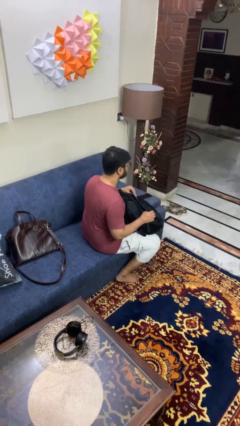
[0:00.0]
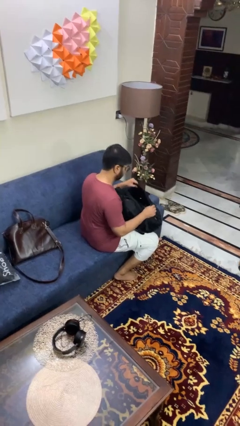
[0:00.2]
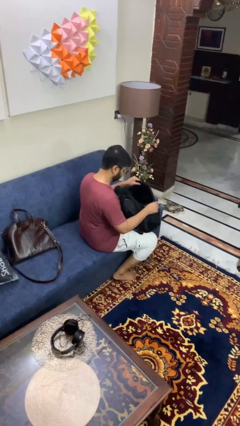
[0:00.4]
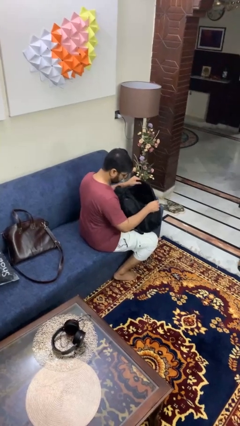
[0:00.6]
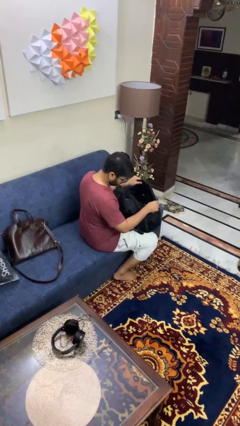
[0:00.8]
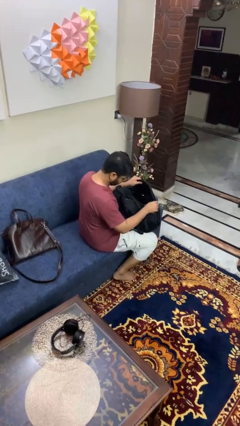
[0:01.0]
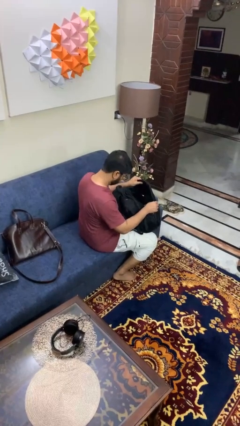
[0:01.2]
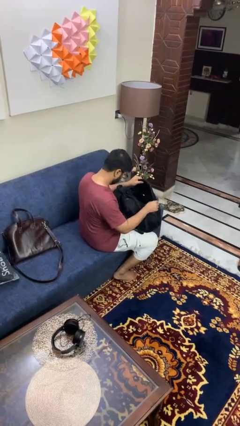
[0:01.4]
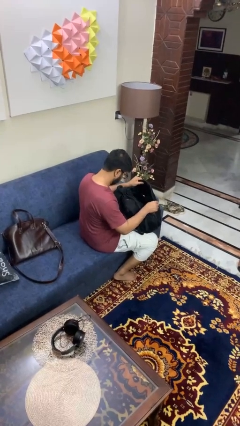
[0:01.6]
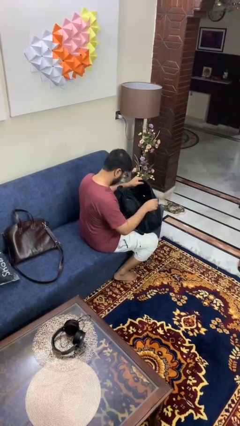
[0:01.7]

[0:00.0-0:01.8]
person searches in backpack

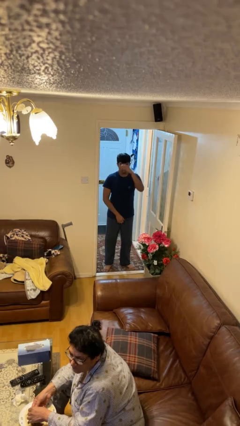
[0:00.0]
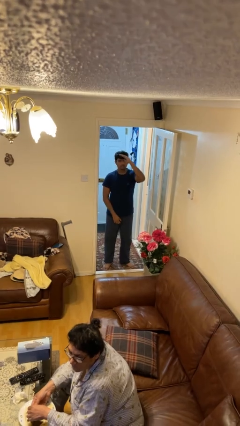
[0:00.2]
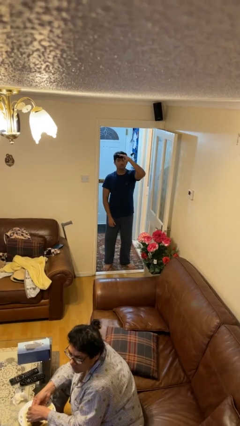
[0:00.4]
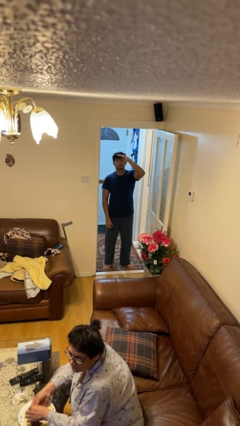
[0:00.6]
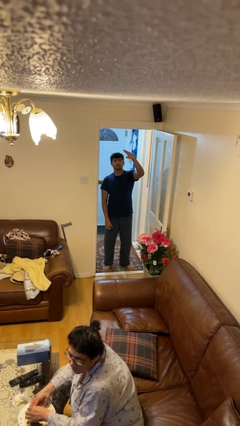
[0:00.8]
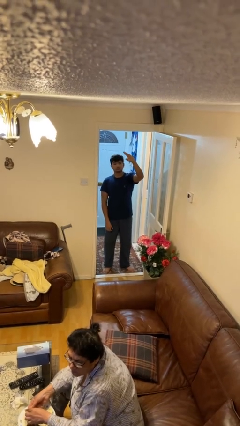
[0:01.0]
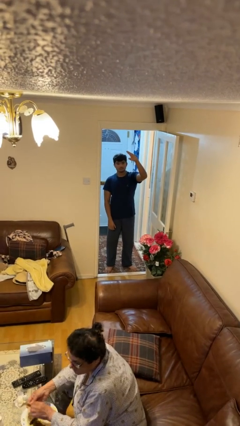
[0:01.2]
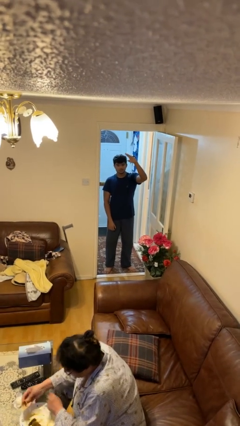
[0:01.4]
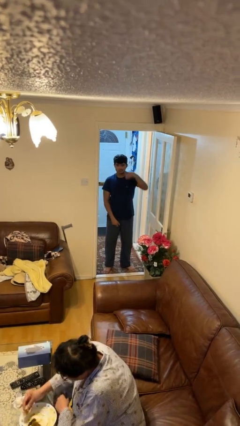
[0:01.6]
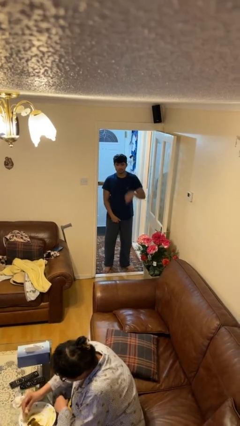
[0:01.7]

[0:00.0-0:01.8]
person salutes

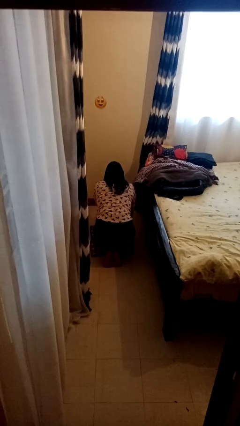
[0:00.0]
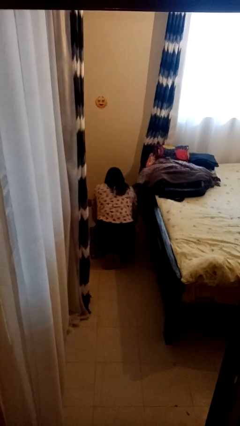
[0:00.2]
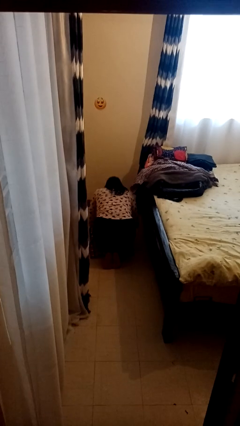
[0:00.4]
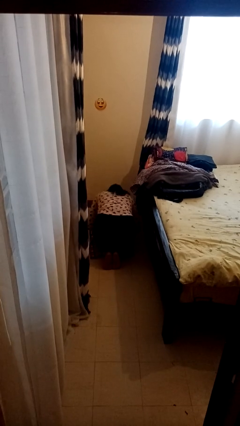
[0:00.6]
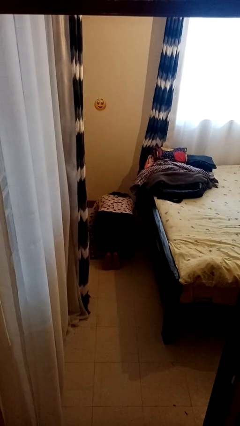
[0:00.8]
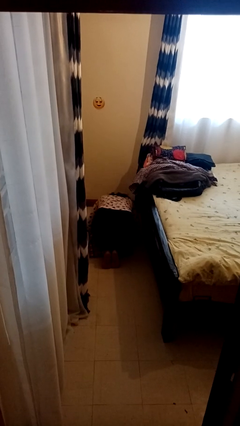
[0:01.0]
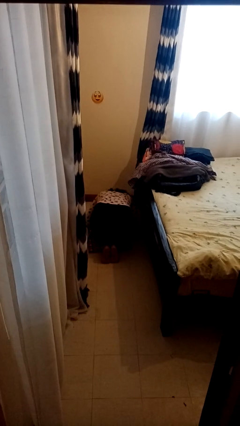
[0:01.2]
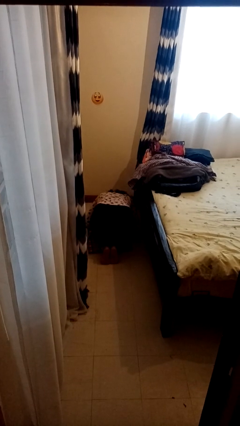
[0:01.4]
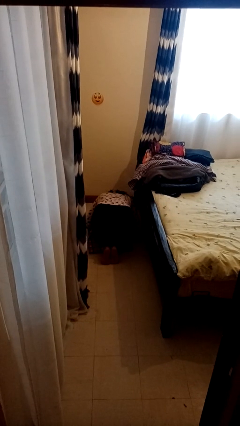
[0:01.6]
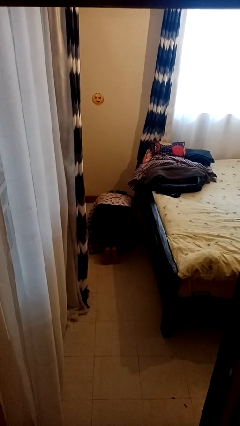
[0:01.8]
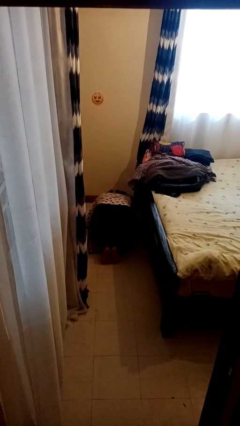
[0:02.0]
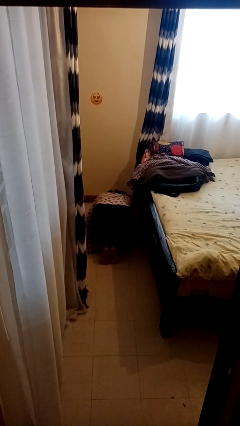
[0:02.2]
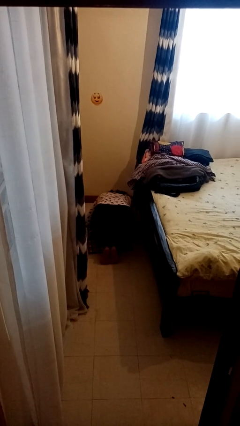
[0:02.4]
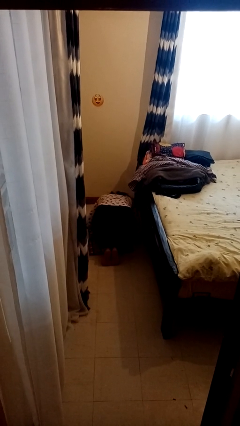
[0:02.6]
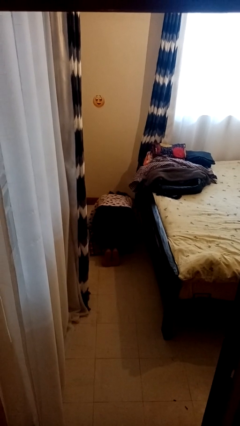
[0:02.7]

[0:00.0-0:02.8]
person searches under bed

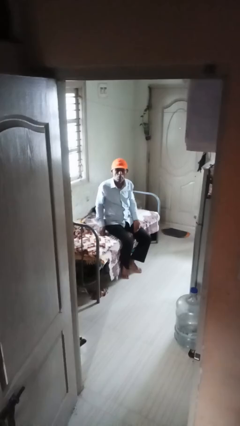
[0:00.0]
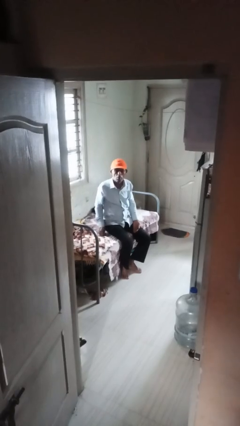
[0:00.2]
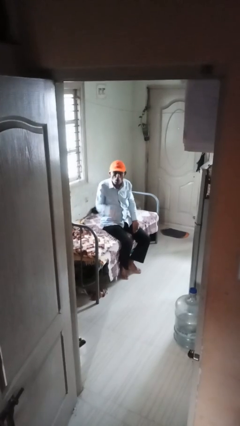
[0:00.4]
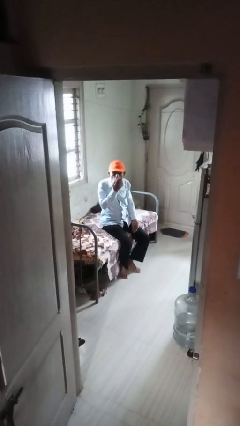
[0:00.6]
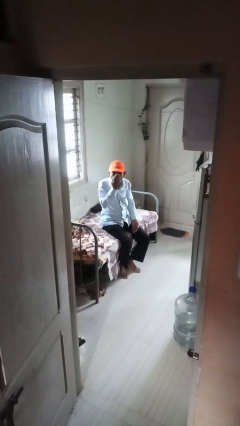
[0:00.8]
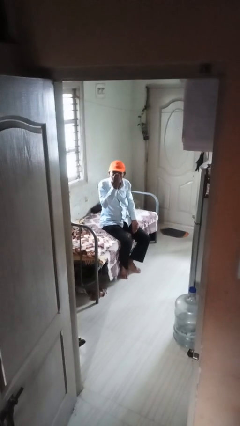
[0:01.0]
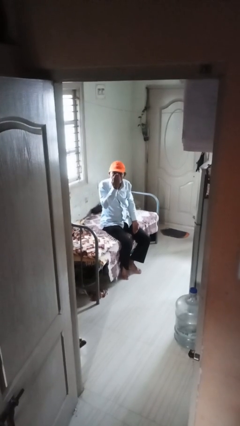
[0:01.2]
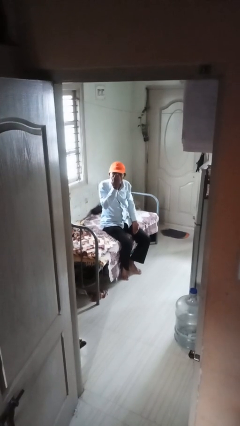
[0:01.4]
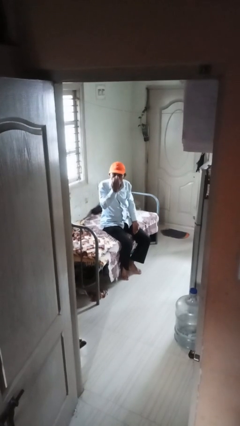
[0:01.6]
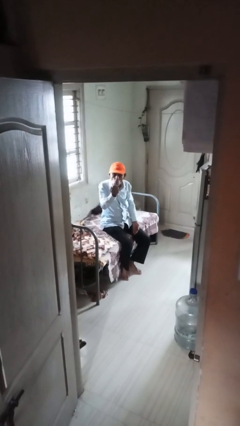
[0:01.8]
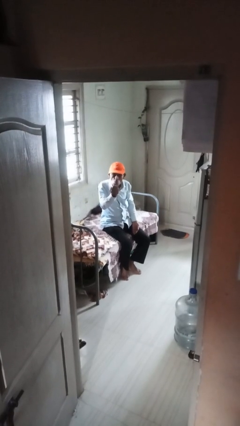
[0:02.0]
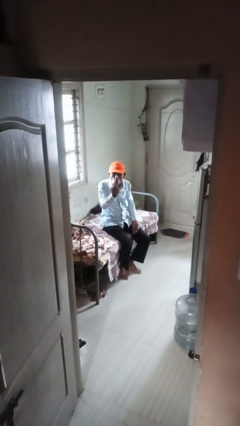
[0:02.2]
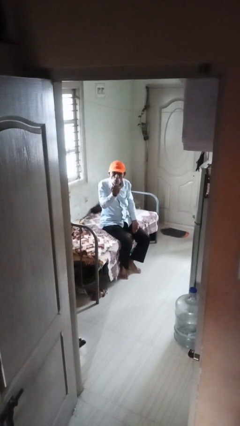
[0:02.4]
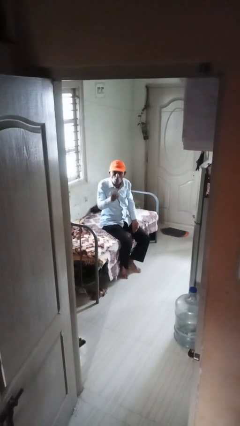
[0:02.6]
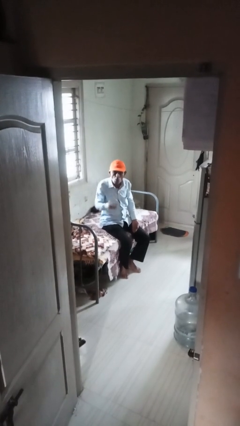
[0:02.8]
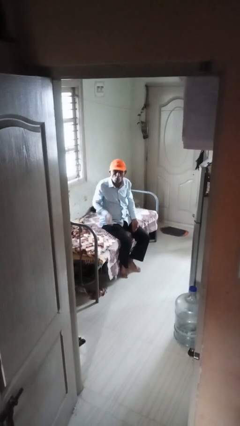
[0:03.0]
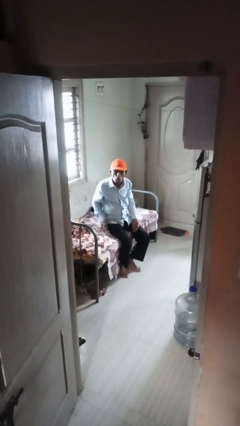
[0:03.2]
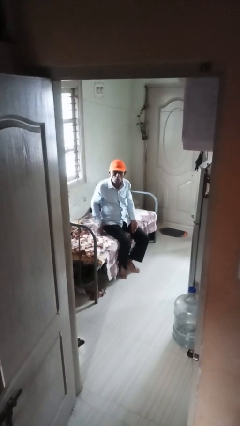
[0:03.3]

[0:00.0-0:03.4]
person gestures blow kiss

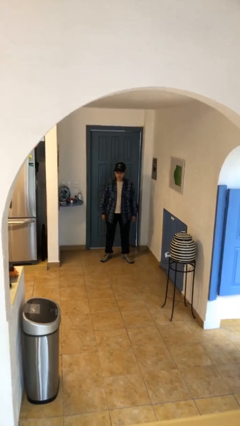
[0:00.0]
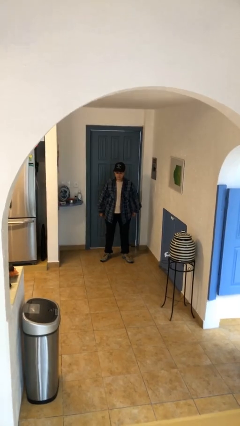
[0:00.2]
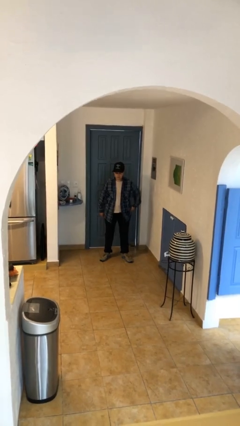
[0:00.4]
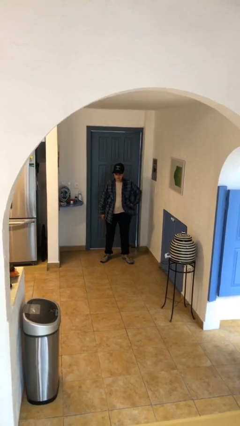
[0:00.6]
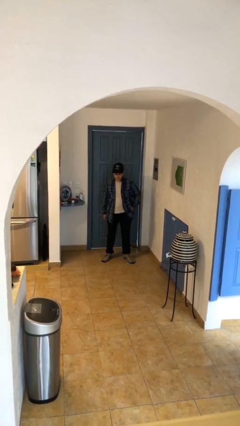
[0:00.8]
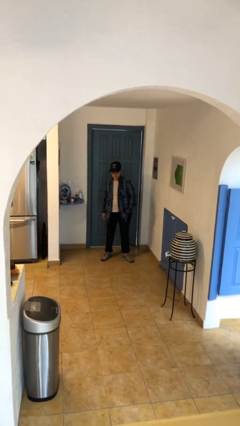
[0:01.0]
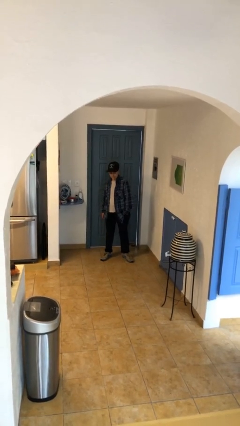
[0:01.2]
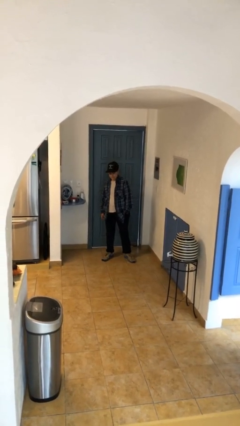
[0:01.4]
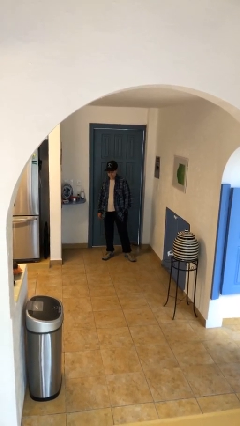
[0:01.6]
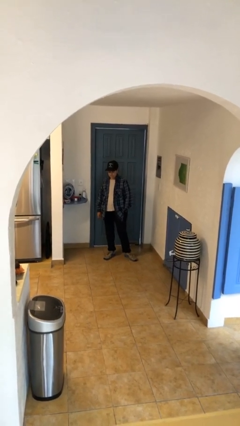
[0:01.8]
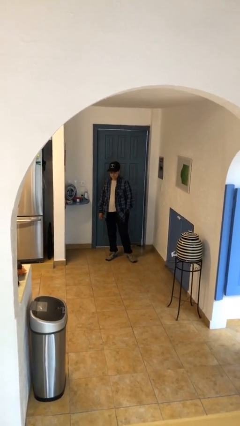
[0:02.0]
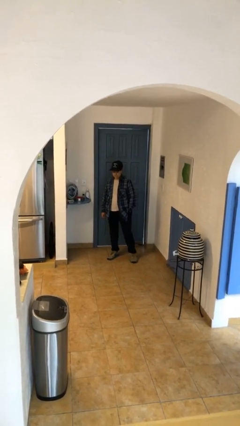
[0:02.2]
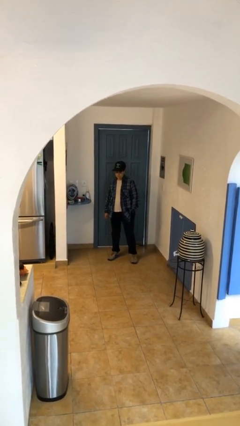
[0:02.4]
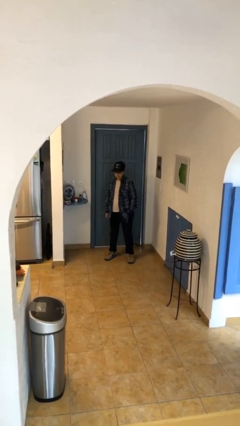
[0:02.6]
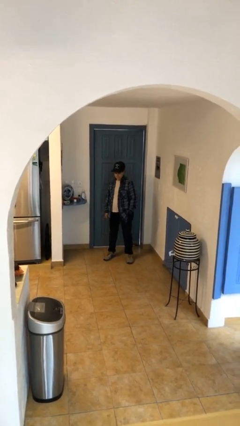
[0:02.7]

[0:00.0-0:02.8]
person puts hands in back pockets

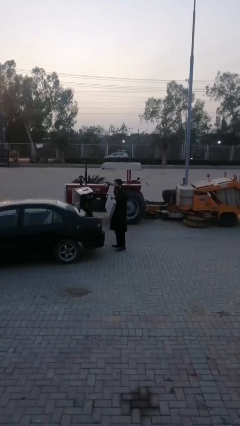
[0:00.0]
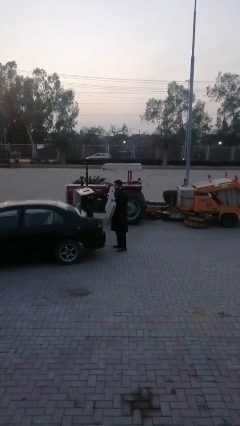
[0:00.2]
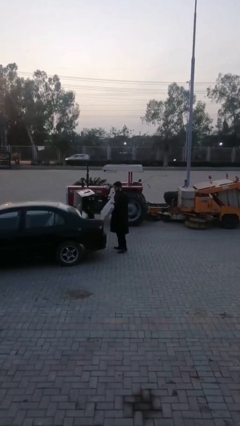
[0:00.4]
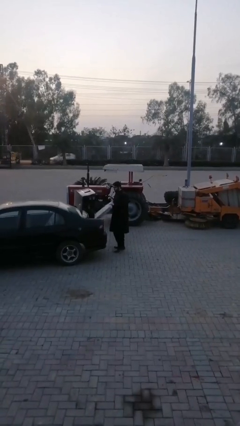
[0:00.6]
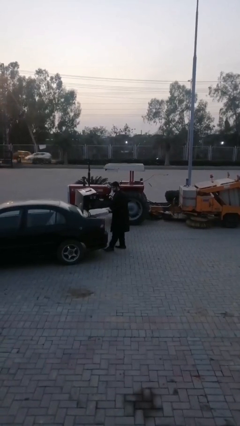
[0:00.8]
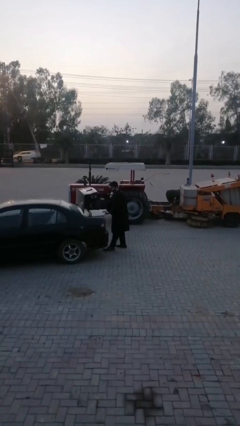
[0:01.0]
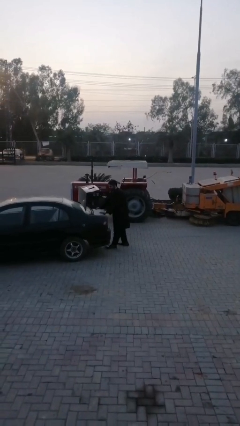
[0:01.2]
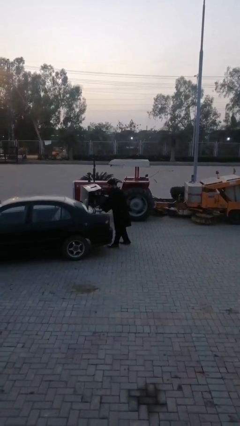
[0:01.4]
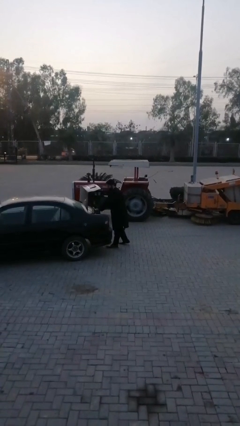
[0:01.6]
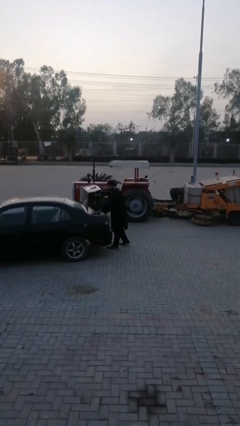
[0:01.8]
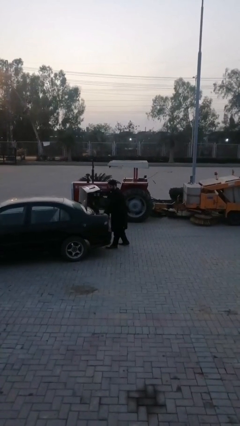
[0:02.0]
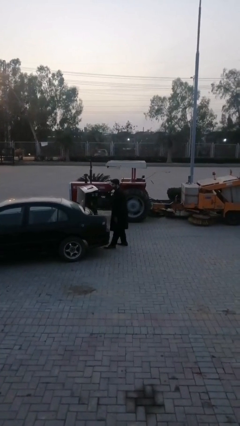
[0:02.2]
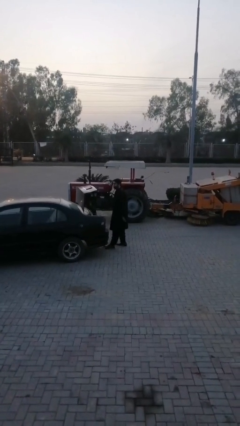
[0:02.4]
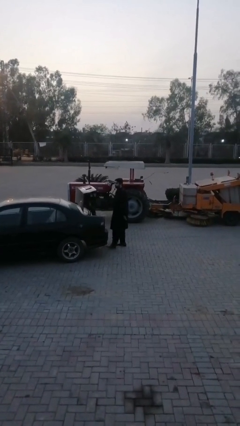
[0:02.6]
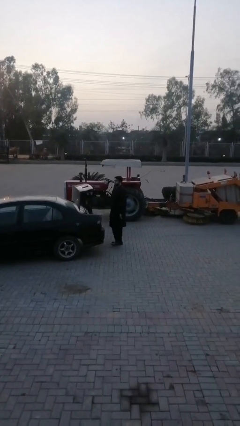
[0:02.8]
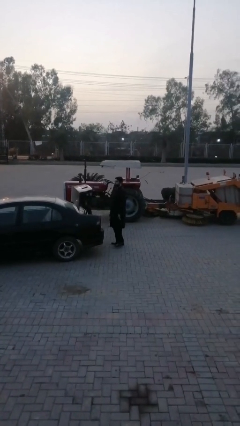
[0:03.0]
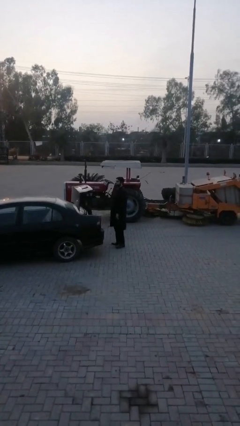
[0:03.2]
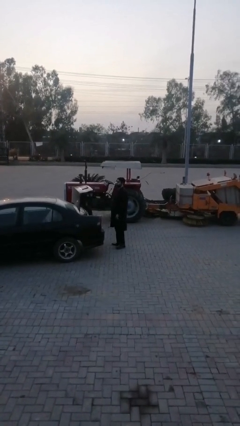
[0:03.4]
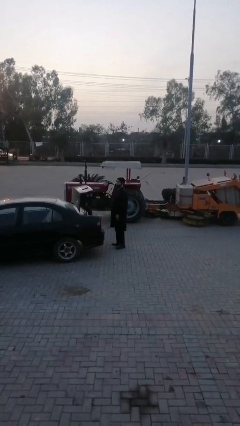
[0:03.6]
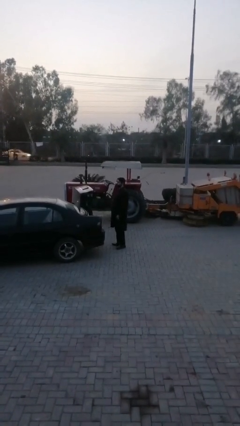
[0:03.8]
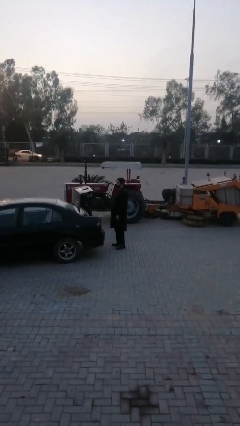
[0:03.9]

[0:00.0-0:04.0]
person loads car

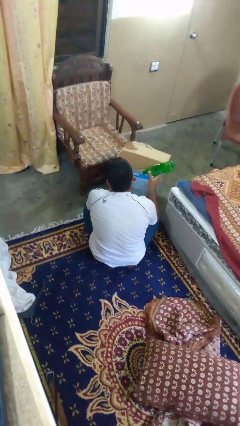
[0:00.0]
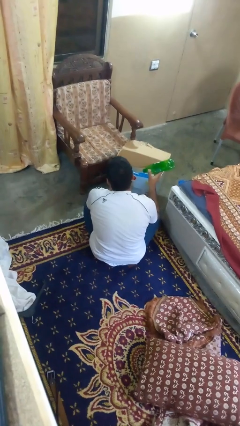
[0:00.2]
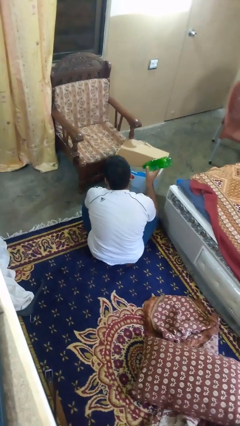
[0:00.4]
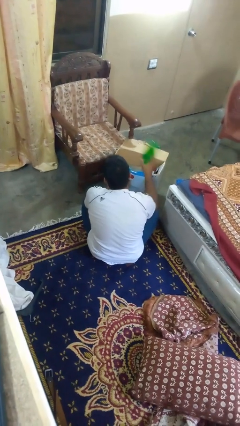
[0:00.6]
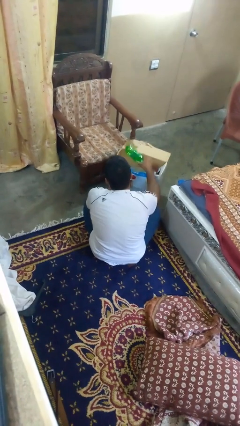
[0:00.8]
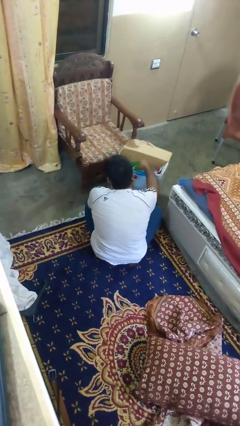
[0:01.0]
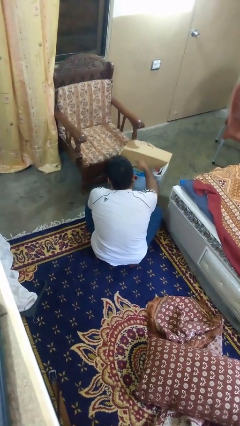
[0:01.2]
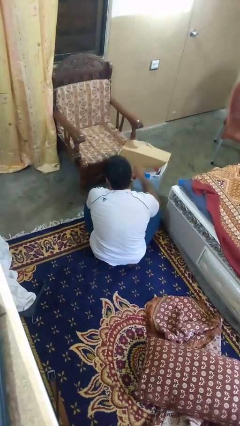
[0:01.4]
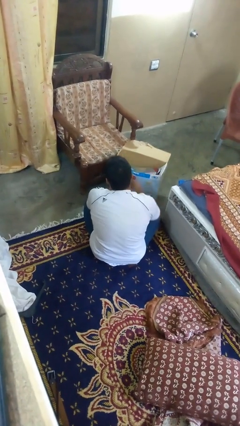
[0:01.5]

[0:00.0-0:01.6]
person puts object into box
